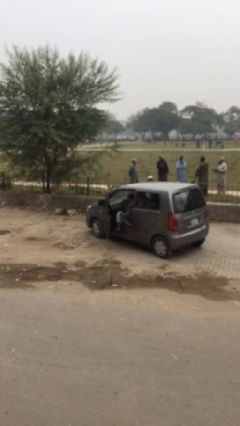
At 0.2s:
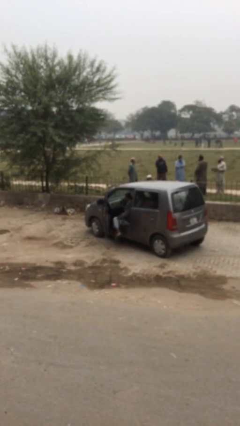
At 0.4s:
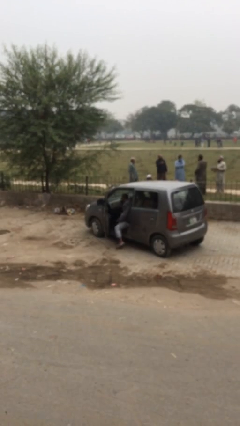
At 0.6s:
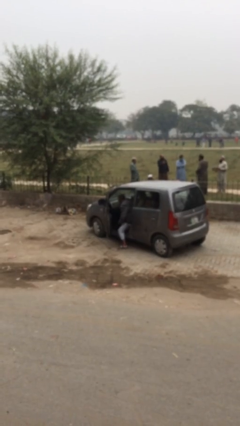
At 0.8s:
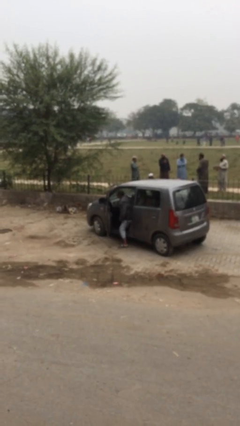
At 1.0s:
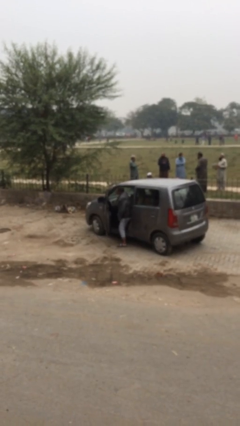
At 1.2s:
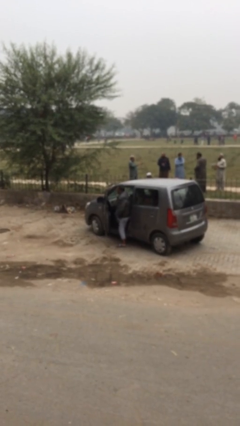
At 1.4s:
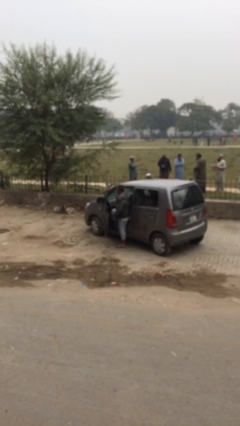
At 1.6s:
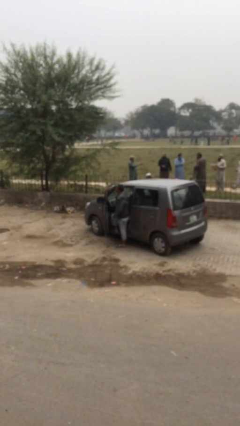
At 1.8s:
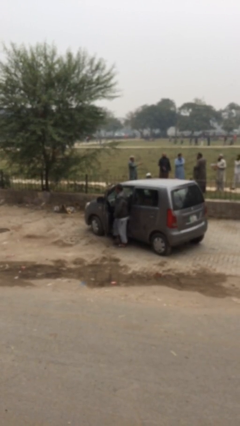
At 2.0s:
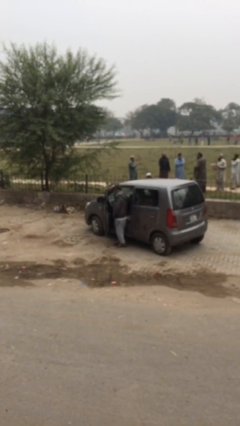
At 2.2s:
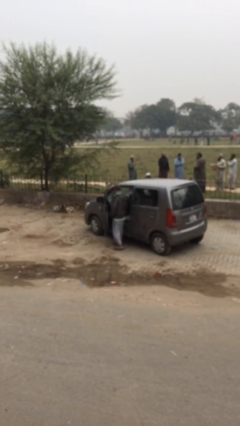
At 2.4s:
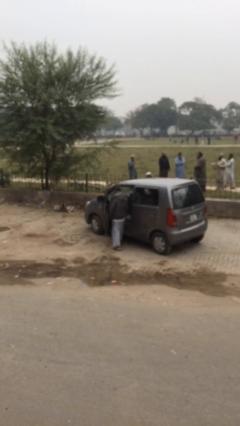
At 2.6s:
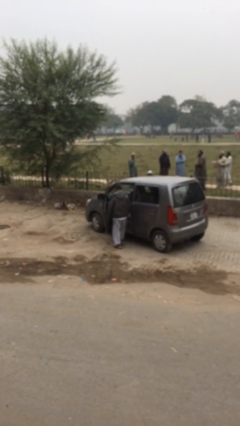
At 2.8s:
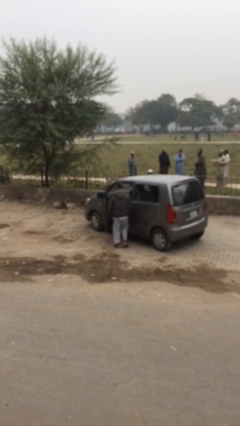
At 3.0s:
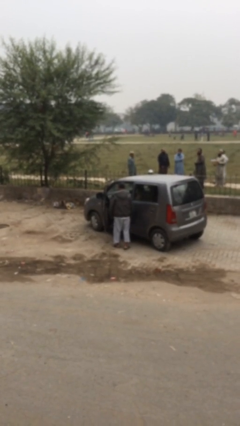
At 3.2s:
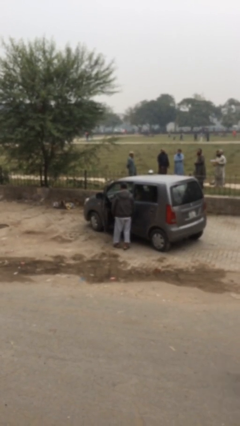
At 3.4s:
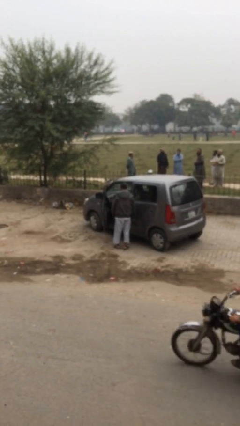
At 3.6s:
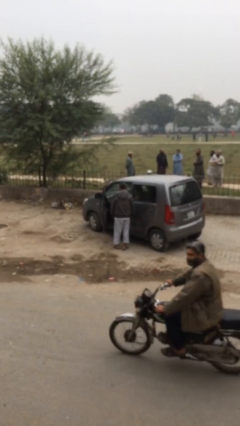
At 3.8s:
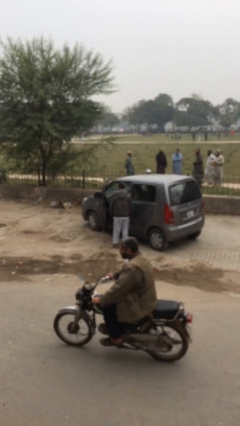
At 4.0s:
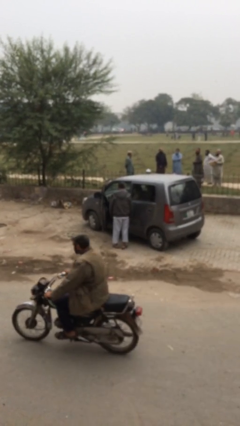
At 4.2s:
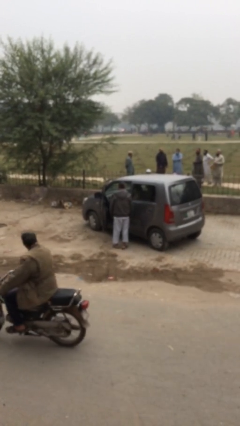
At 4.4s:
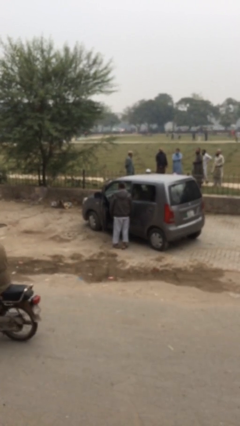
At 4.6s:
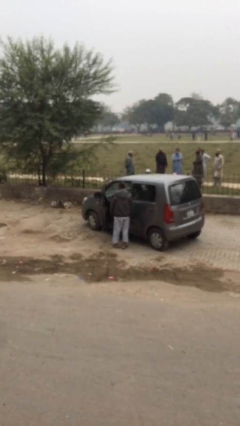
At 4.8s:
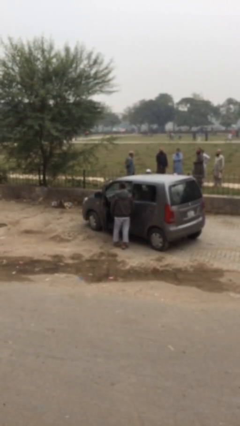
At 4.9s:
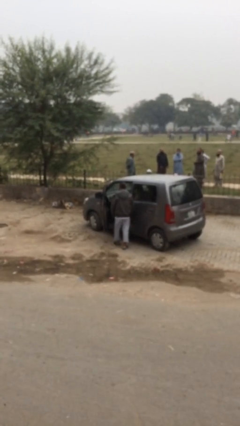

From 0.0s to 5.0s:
person exits car

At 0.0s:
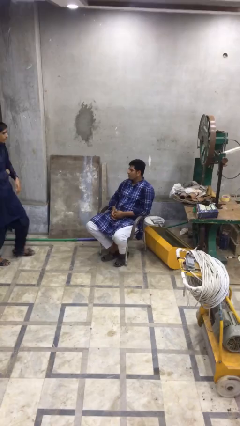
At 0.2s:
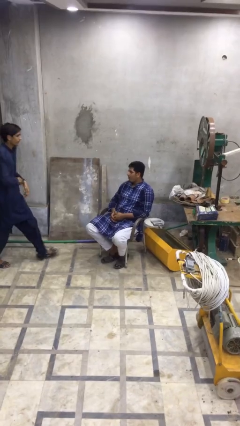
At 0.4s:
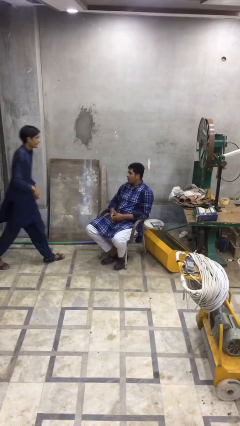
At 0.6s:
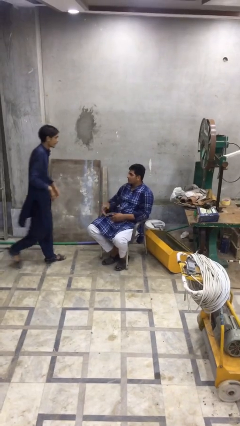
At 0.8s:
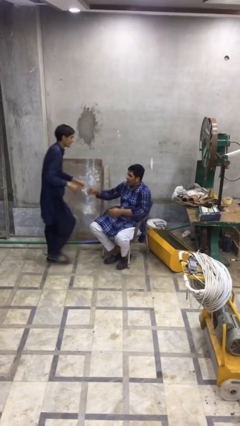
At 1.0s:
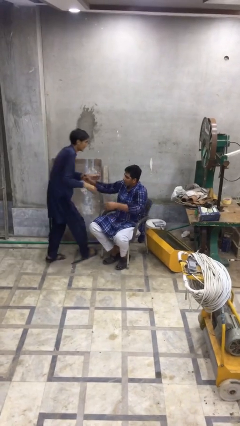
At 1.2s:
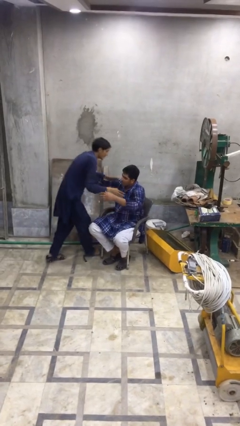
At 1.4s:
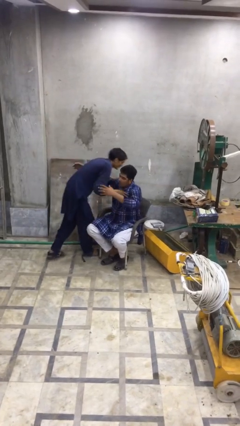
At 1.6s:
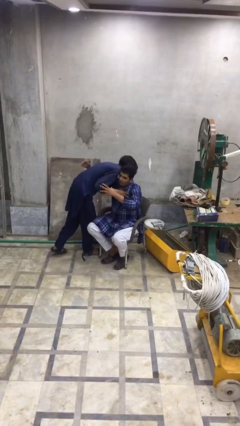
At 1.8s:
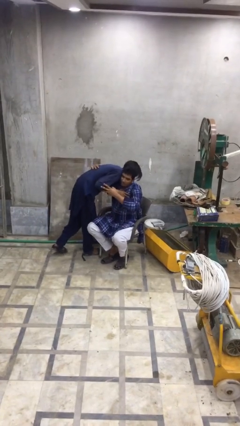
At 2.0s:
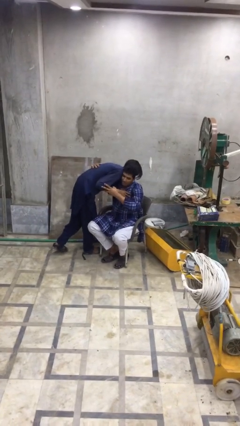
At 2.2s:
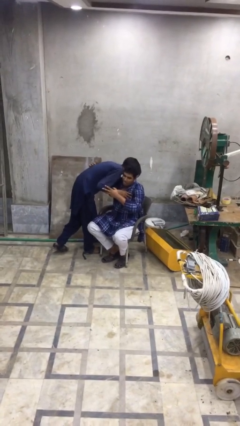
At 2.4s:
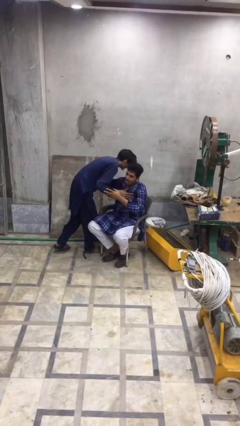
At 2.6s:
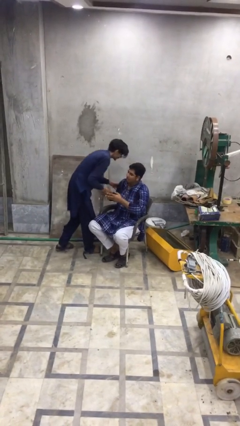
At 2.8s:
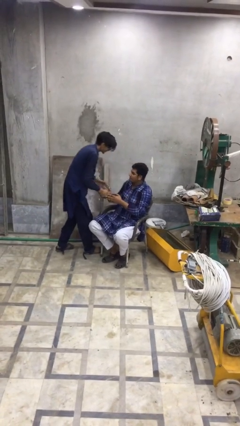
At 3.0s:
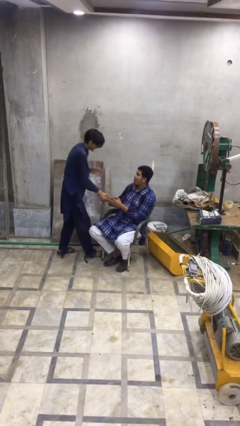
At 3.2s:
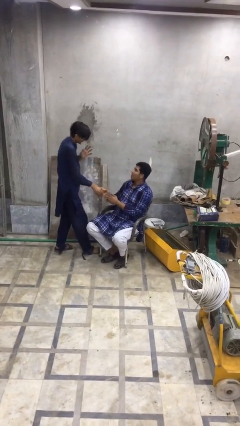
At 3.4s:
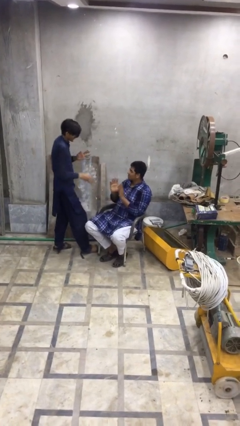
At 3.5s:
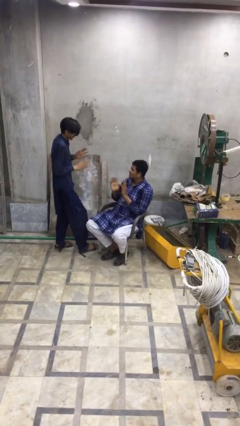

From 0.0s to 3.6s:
person embraces person

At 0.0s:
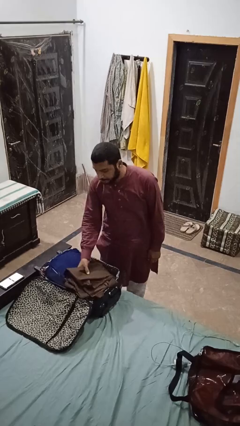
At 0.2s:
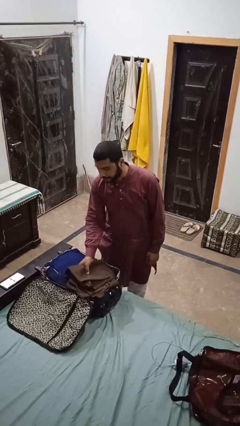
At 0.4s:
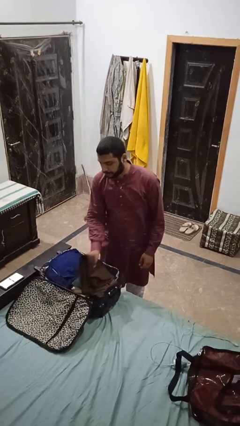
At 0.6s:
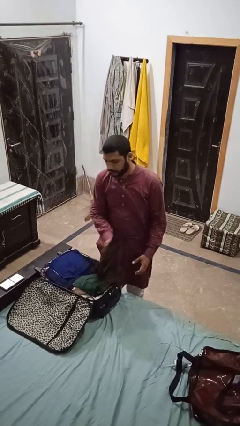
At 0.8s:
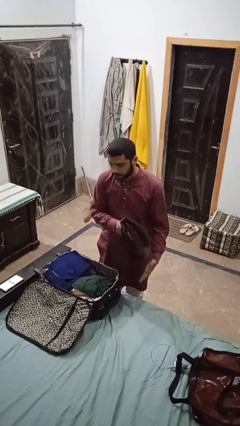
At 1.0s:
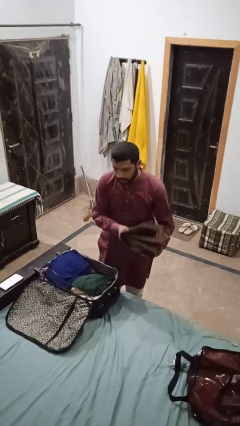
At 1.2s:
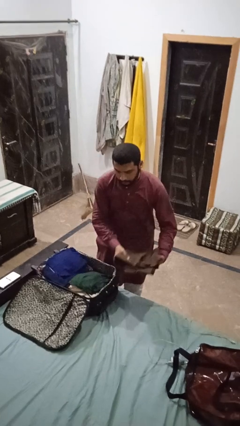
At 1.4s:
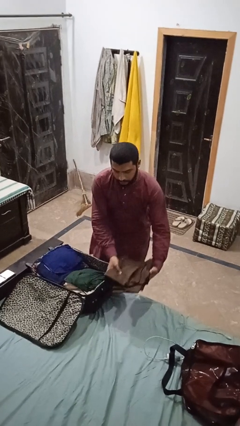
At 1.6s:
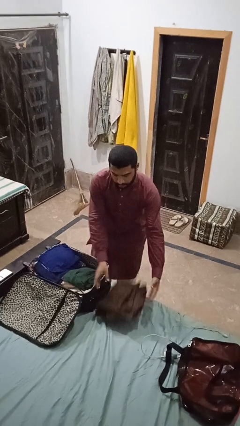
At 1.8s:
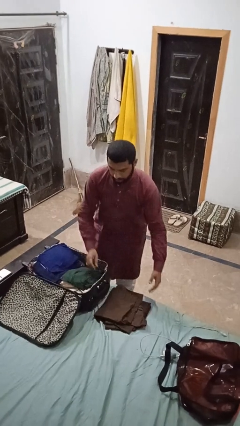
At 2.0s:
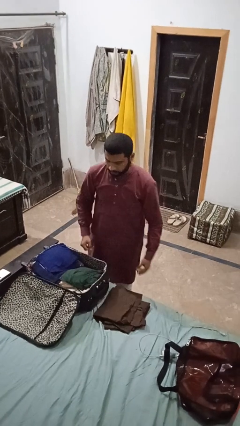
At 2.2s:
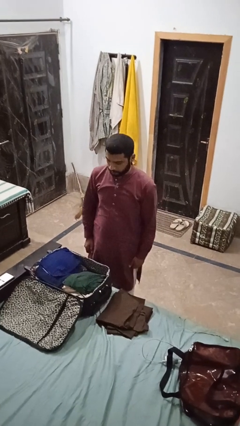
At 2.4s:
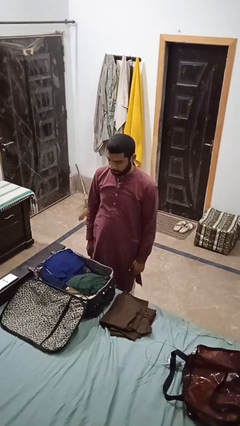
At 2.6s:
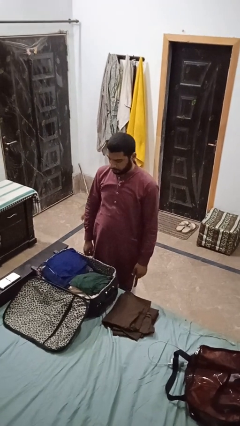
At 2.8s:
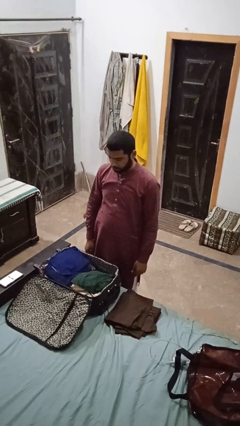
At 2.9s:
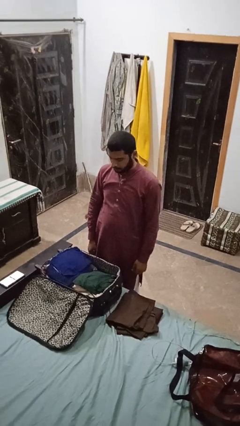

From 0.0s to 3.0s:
person unloads clothes from suitcase

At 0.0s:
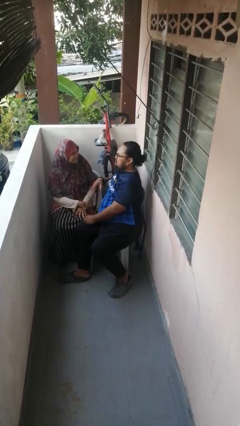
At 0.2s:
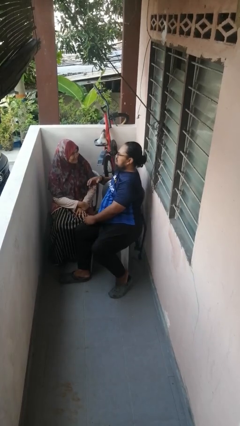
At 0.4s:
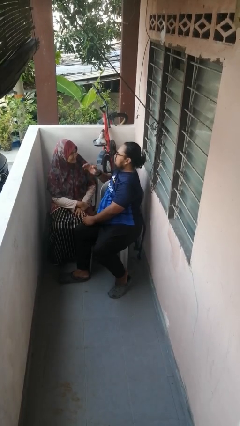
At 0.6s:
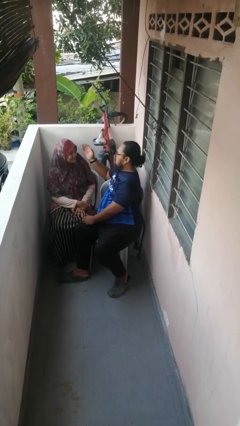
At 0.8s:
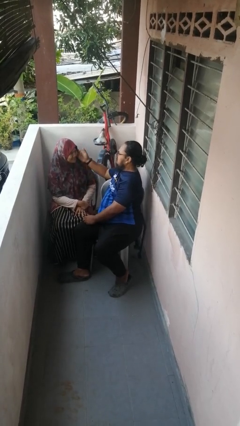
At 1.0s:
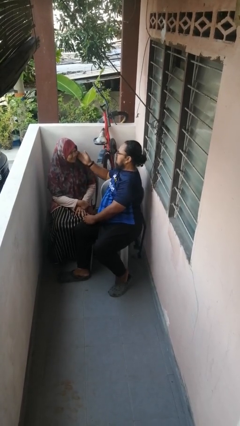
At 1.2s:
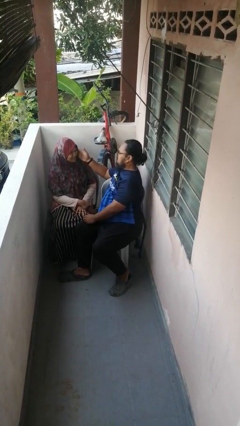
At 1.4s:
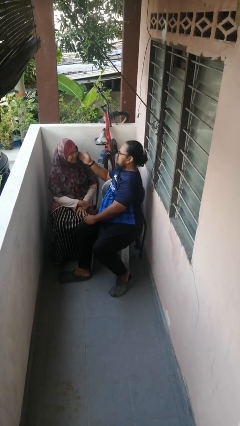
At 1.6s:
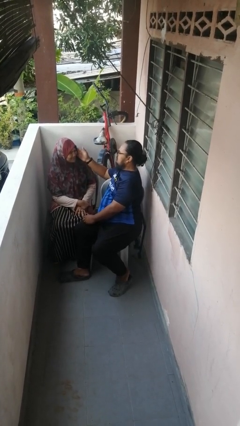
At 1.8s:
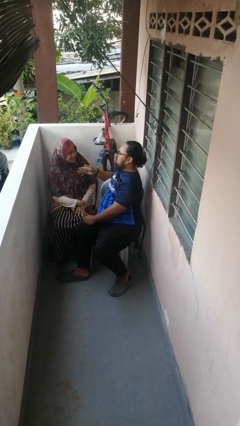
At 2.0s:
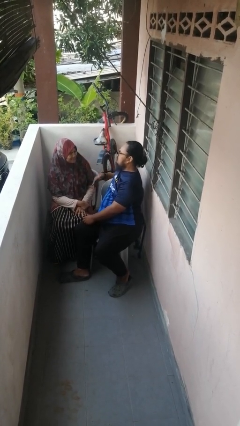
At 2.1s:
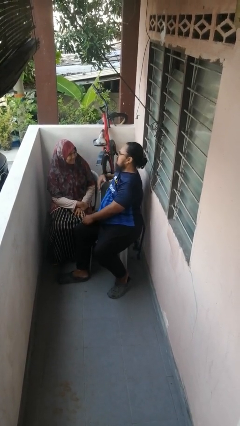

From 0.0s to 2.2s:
person touches face of person

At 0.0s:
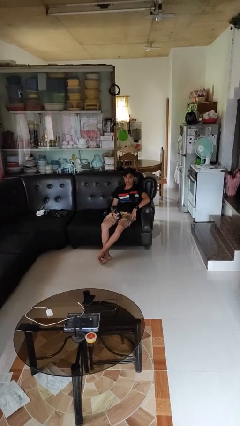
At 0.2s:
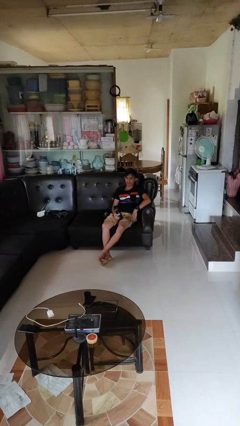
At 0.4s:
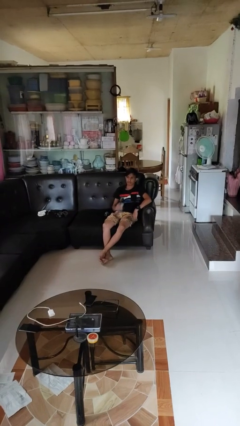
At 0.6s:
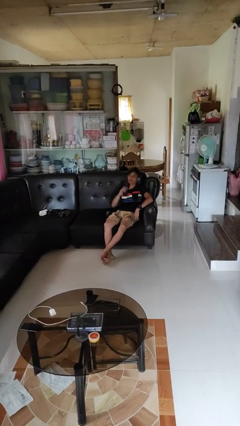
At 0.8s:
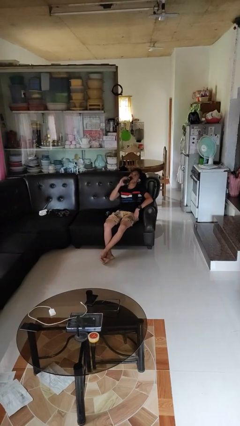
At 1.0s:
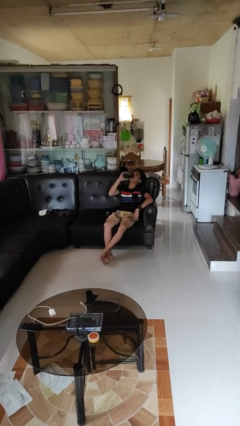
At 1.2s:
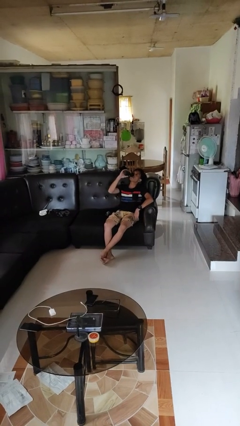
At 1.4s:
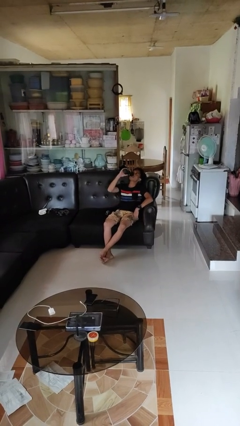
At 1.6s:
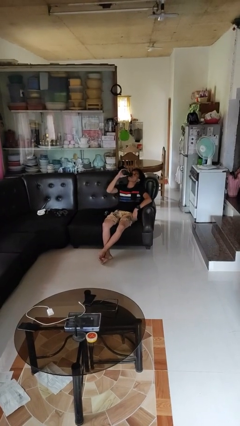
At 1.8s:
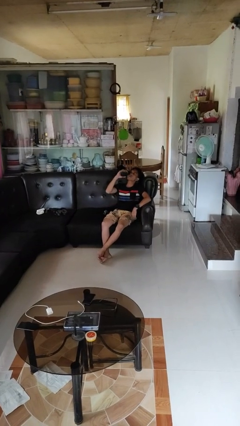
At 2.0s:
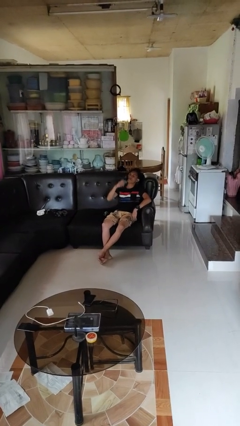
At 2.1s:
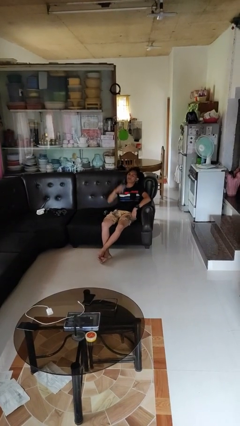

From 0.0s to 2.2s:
person drinks from bottle

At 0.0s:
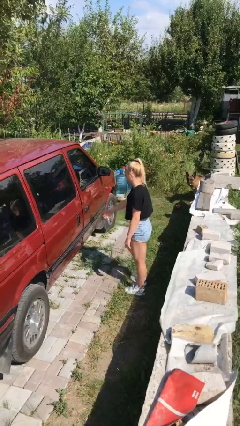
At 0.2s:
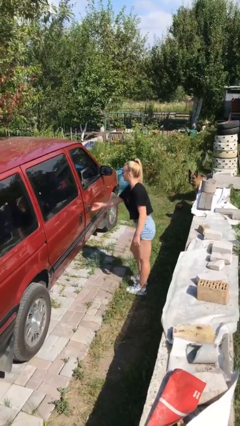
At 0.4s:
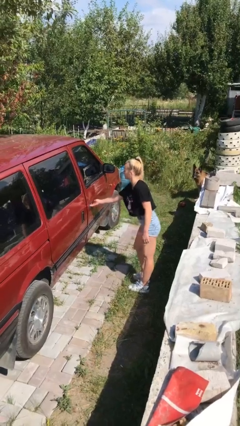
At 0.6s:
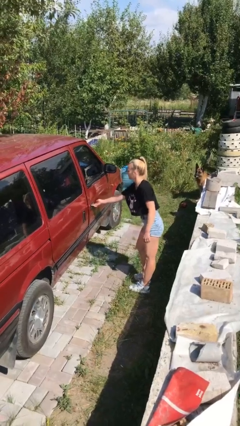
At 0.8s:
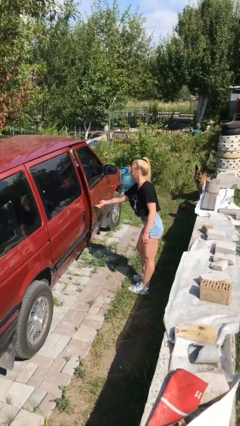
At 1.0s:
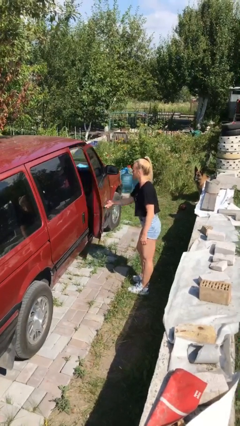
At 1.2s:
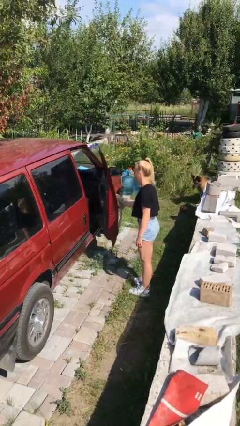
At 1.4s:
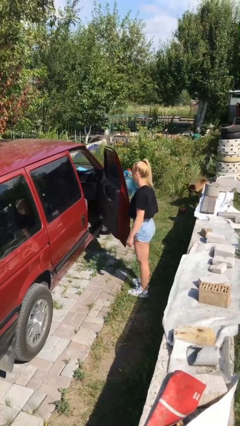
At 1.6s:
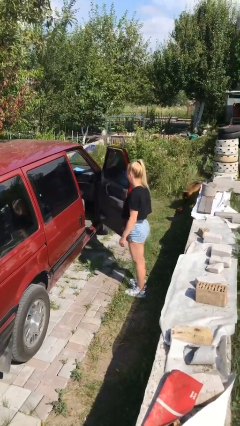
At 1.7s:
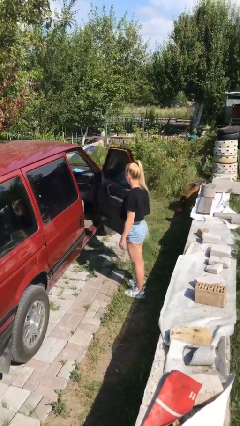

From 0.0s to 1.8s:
person opens car door
